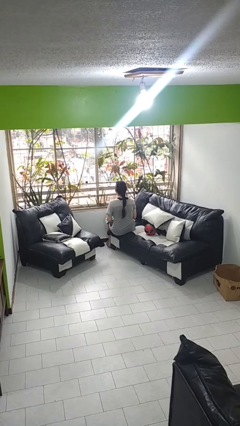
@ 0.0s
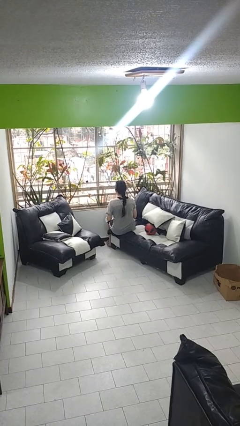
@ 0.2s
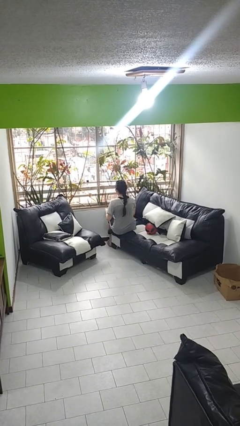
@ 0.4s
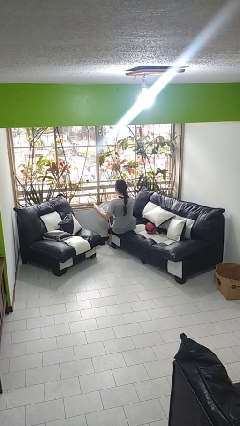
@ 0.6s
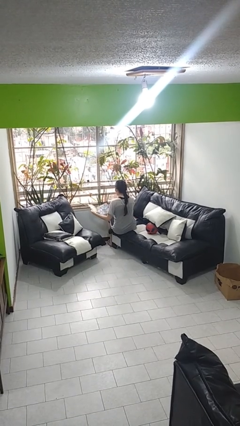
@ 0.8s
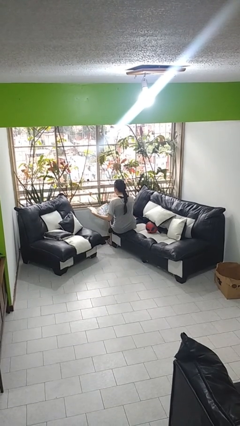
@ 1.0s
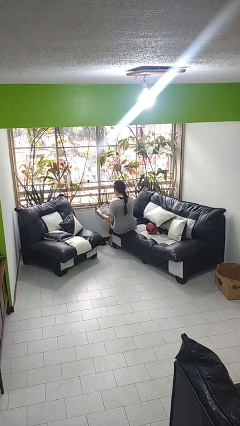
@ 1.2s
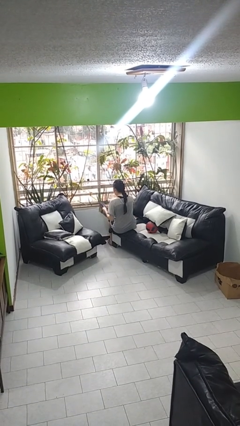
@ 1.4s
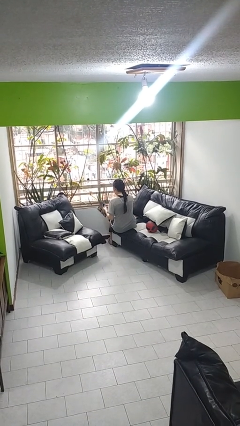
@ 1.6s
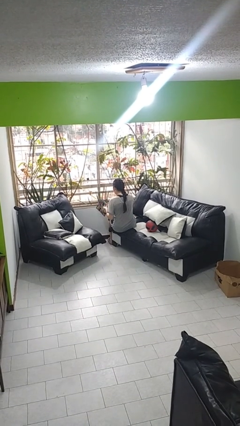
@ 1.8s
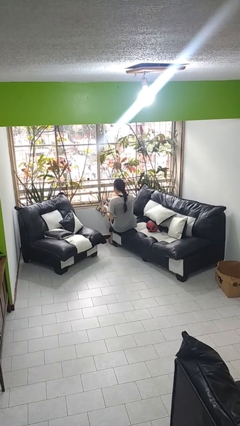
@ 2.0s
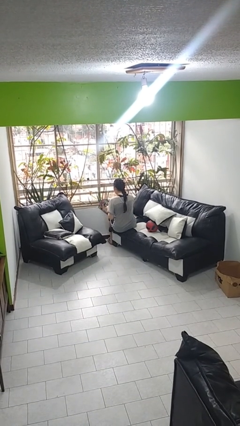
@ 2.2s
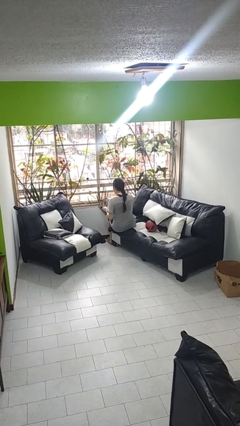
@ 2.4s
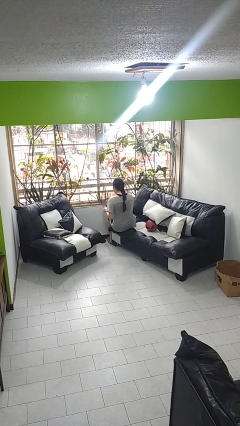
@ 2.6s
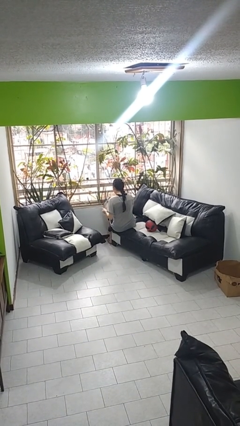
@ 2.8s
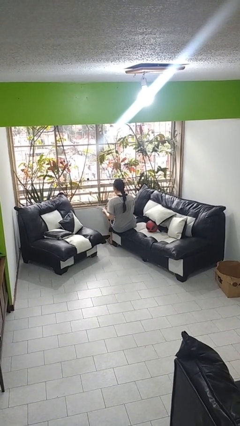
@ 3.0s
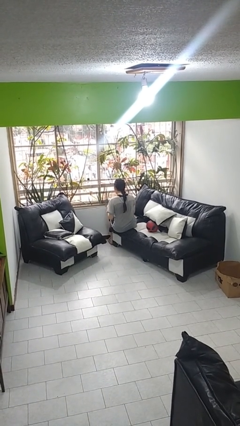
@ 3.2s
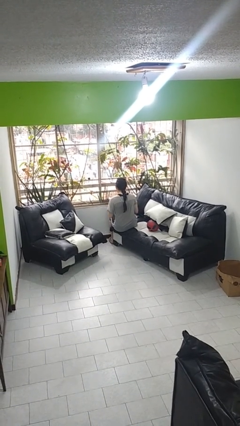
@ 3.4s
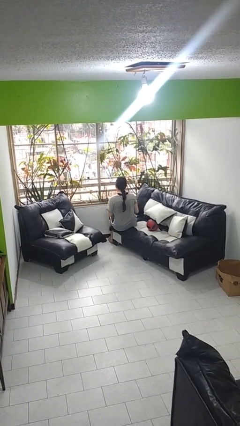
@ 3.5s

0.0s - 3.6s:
person reads magazine

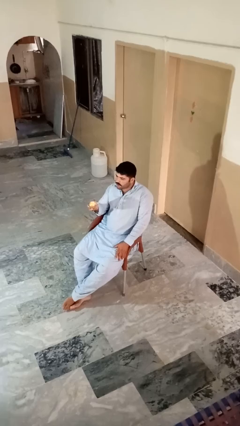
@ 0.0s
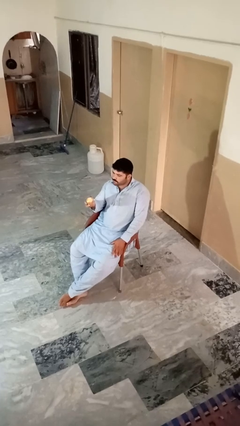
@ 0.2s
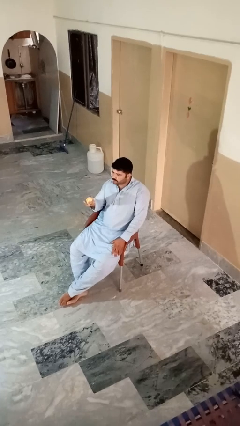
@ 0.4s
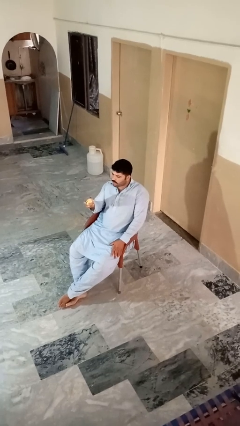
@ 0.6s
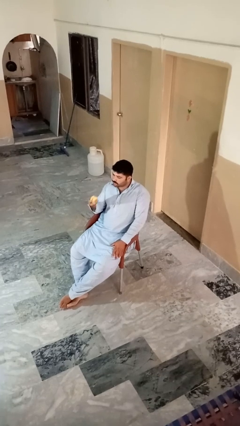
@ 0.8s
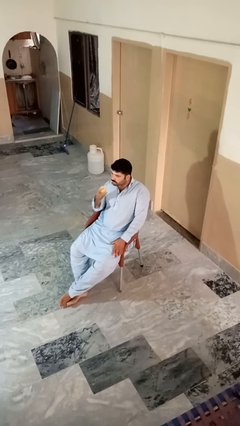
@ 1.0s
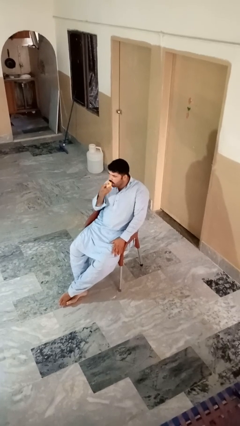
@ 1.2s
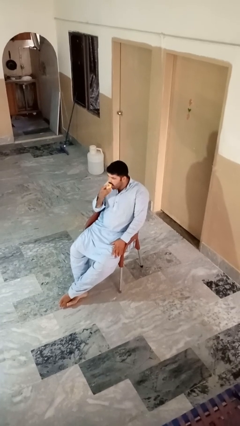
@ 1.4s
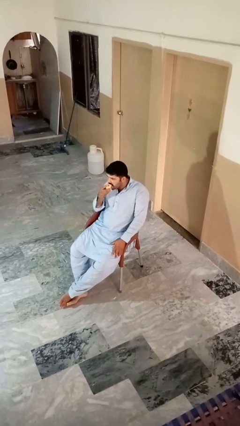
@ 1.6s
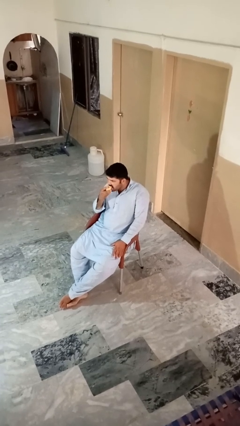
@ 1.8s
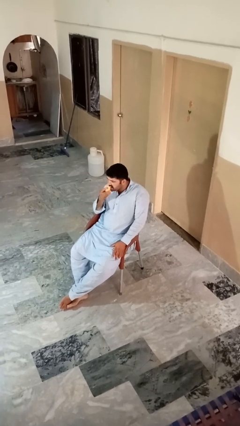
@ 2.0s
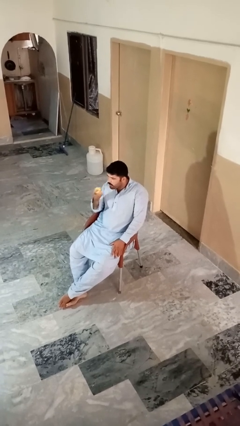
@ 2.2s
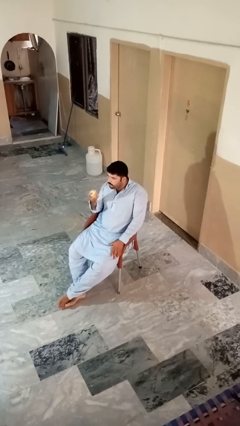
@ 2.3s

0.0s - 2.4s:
person eats apple

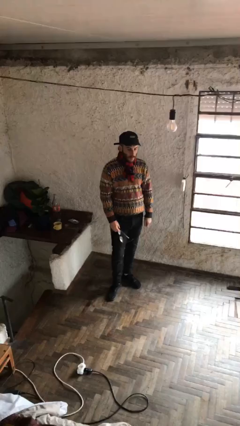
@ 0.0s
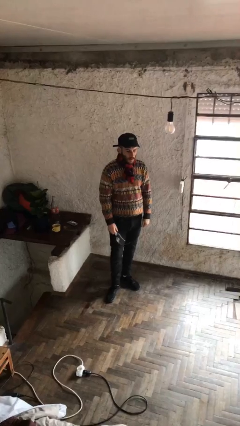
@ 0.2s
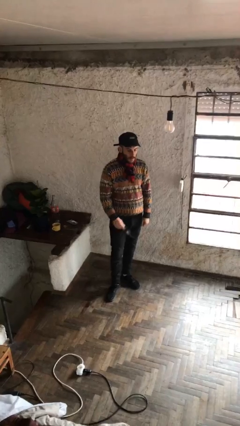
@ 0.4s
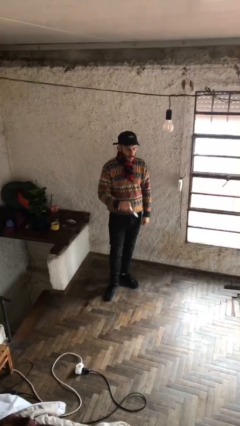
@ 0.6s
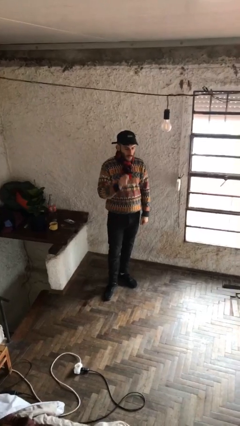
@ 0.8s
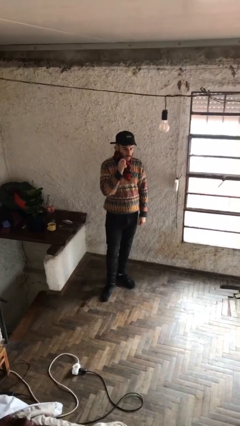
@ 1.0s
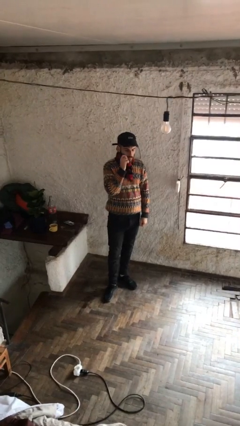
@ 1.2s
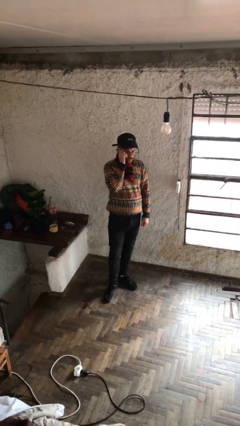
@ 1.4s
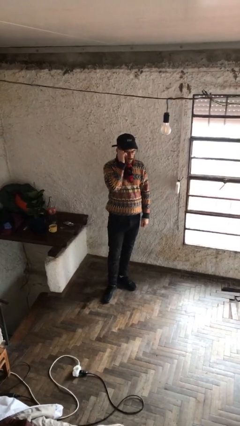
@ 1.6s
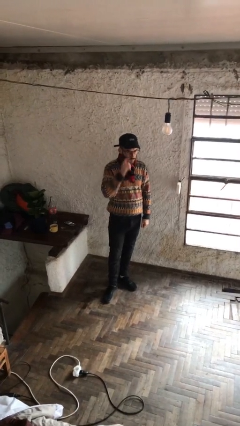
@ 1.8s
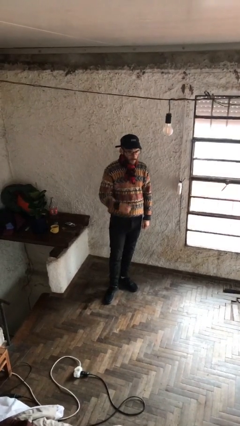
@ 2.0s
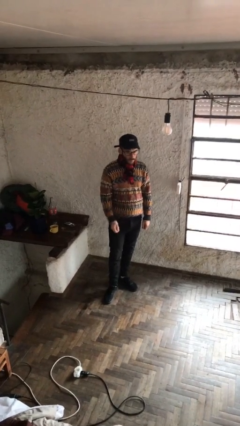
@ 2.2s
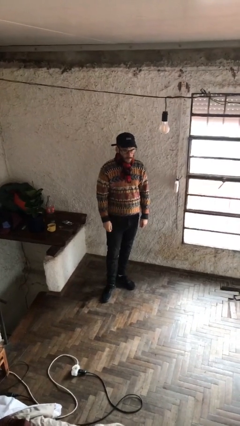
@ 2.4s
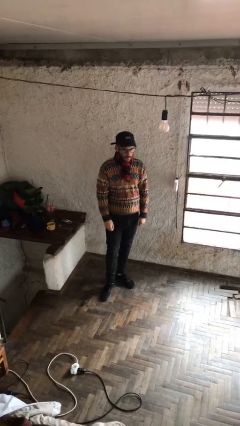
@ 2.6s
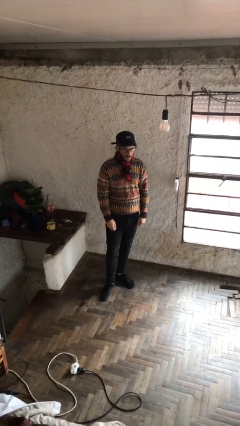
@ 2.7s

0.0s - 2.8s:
person puts on glasses

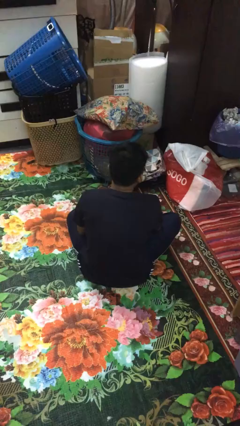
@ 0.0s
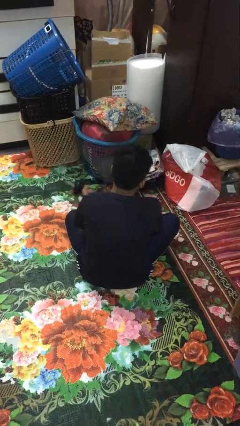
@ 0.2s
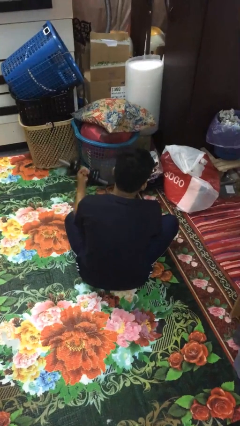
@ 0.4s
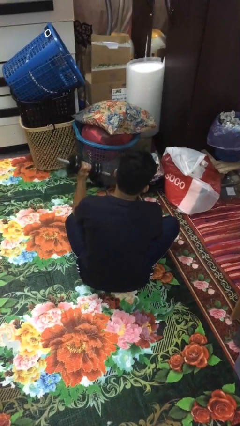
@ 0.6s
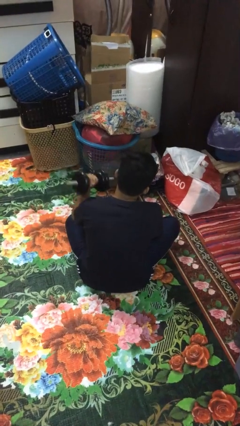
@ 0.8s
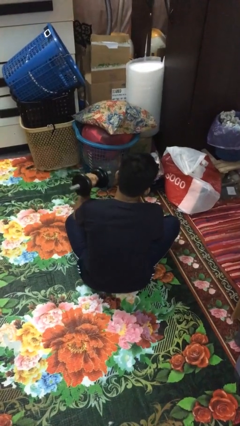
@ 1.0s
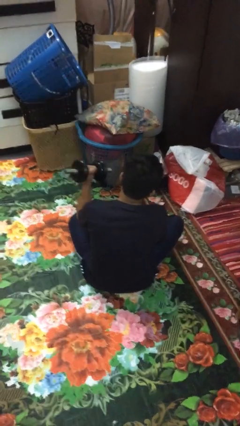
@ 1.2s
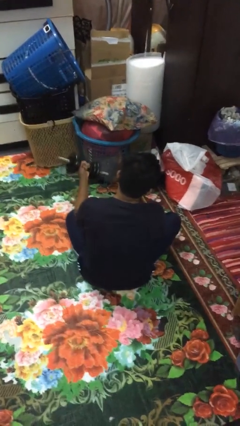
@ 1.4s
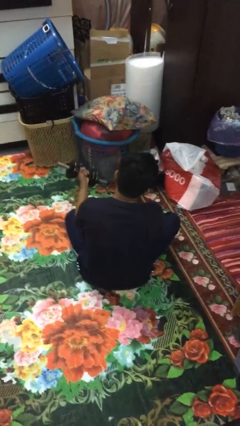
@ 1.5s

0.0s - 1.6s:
person lifts dumbbells

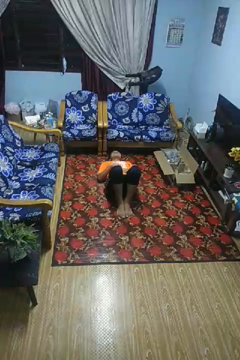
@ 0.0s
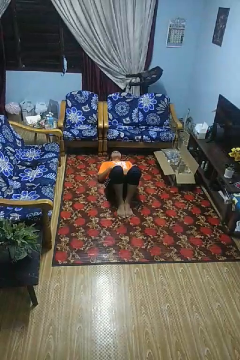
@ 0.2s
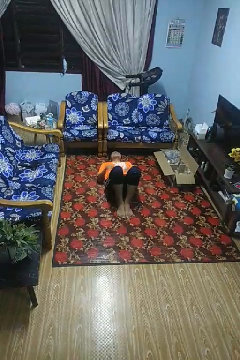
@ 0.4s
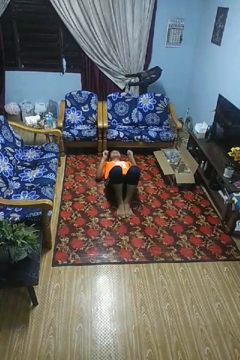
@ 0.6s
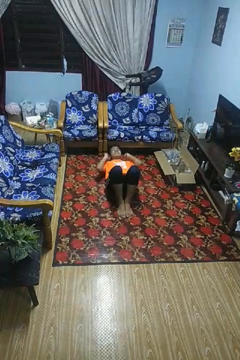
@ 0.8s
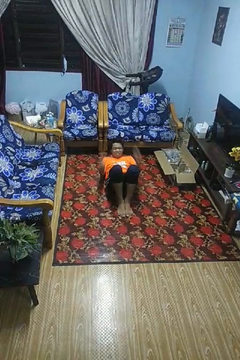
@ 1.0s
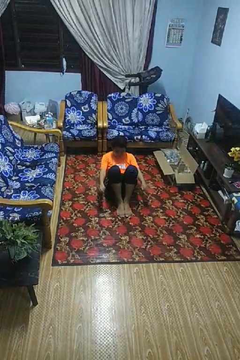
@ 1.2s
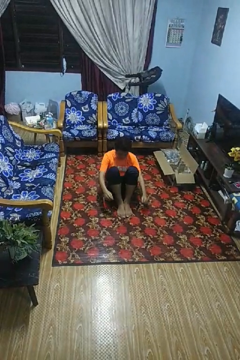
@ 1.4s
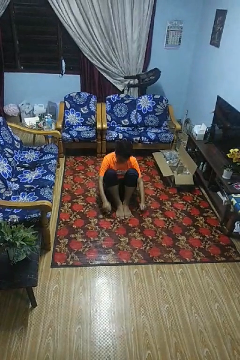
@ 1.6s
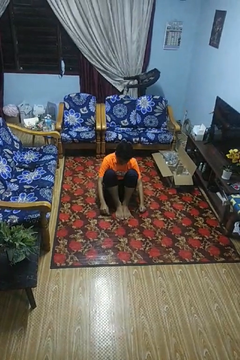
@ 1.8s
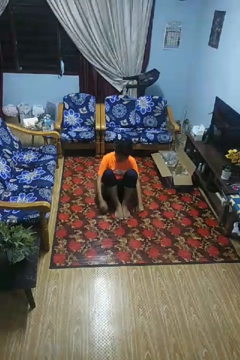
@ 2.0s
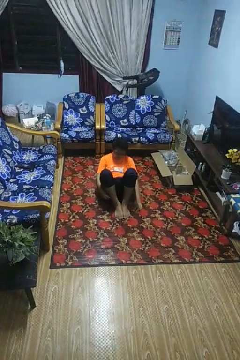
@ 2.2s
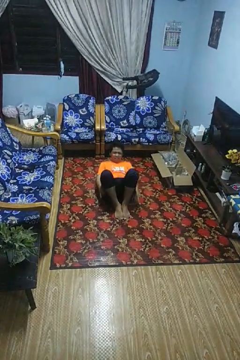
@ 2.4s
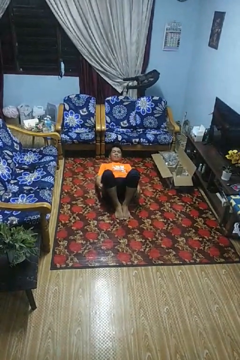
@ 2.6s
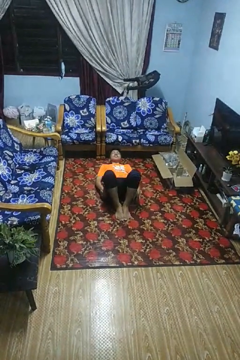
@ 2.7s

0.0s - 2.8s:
person exercises with situp

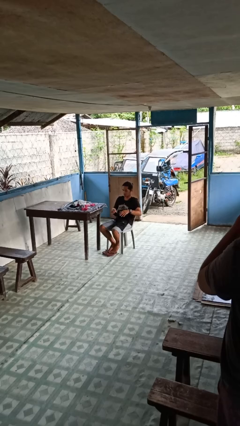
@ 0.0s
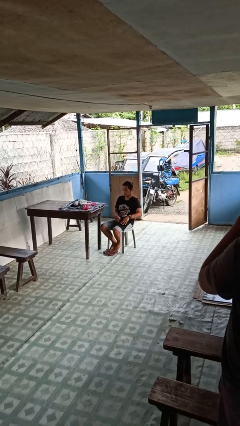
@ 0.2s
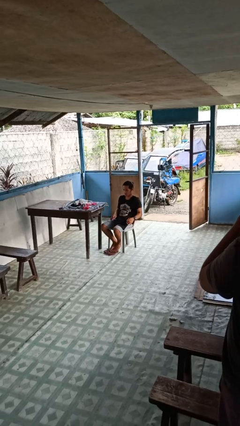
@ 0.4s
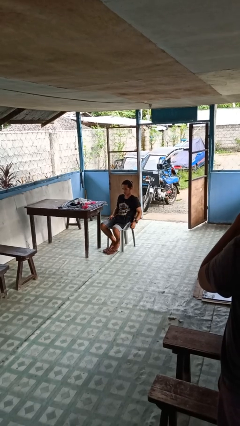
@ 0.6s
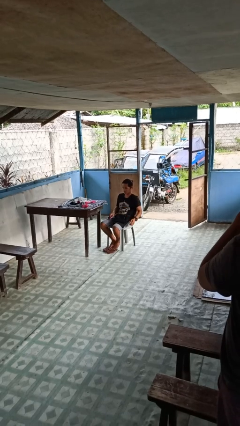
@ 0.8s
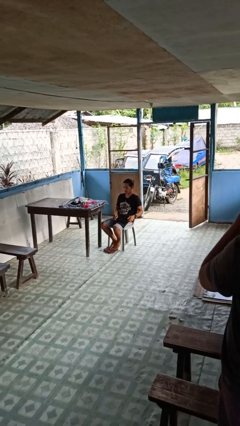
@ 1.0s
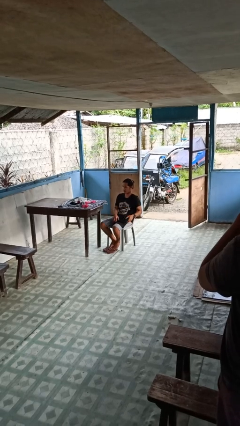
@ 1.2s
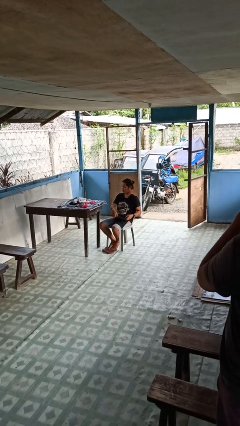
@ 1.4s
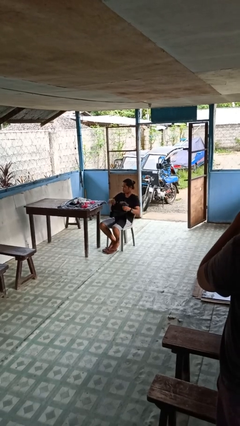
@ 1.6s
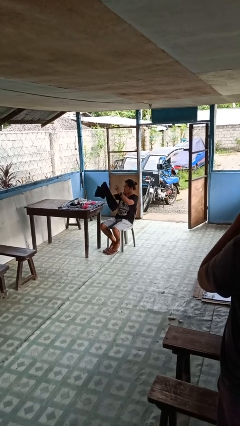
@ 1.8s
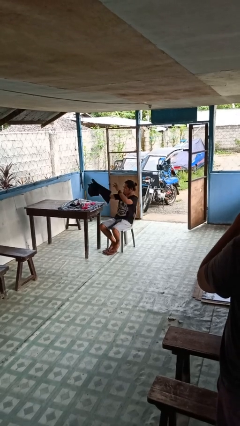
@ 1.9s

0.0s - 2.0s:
person folds pants

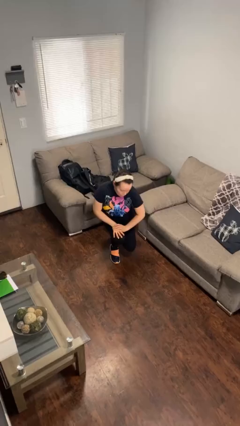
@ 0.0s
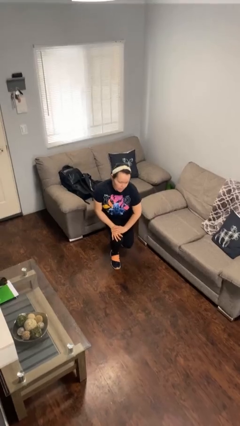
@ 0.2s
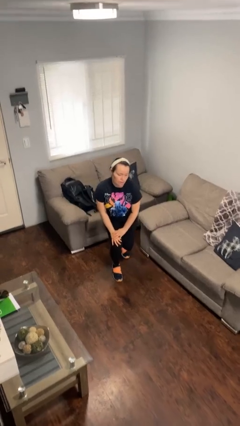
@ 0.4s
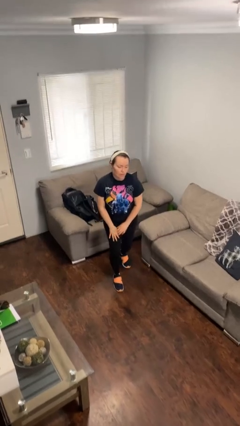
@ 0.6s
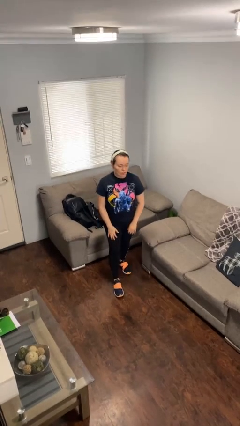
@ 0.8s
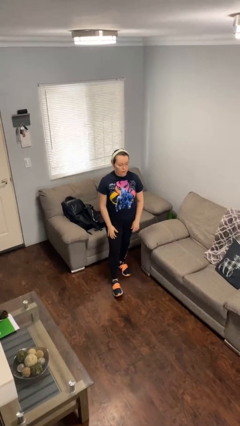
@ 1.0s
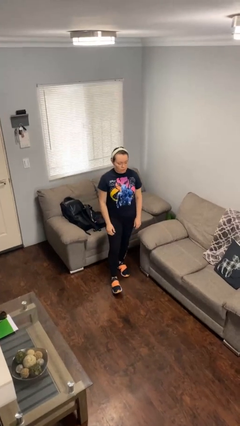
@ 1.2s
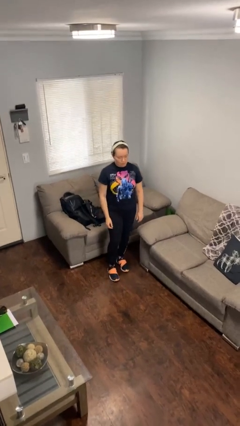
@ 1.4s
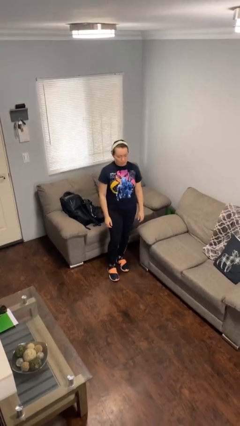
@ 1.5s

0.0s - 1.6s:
person stands up from floor

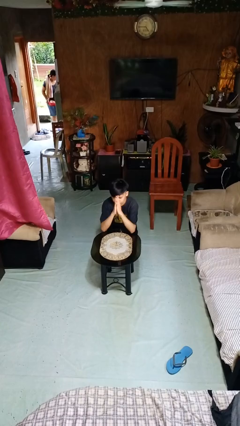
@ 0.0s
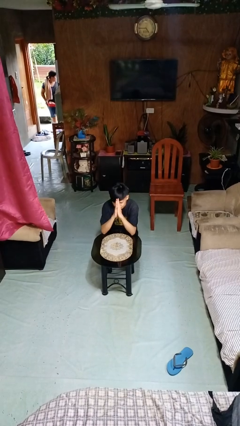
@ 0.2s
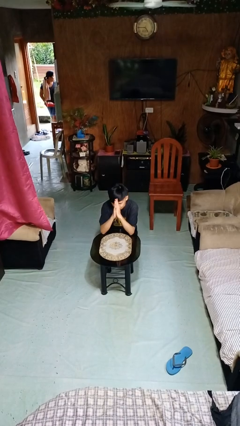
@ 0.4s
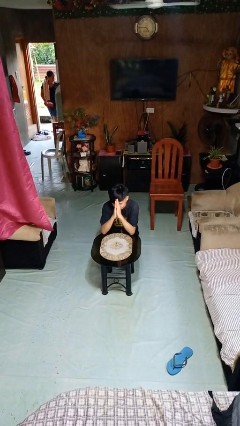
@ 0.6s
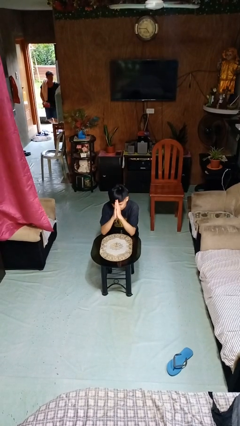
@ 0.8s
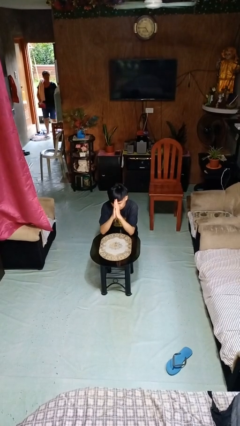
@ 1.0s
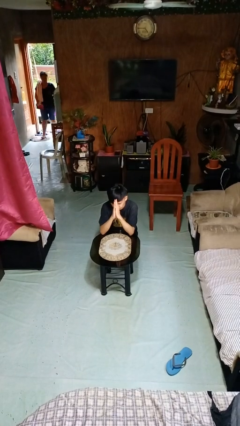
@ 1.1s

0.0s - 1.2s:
person prays
